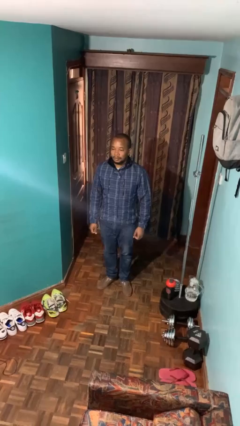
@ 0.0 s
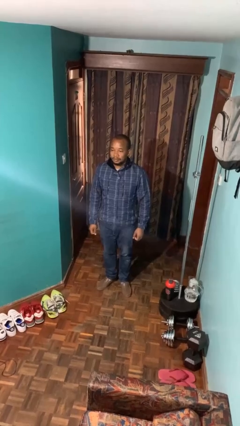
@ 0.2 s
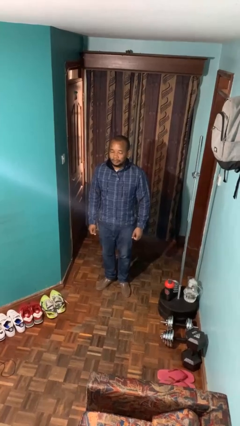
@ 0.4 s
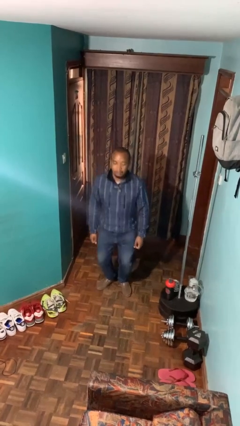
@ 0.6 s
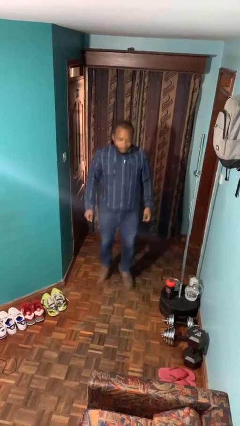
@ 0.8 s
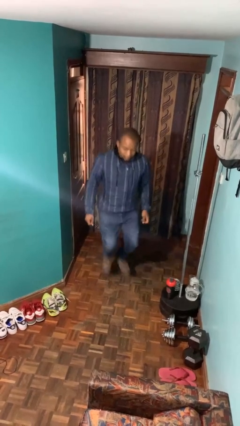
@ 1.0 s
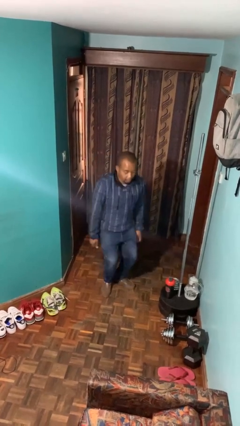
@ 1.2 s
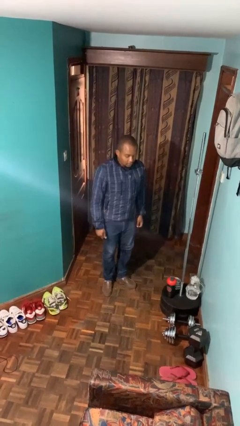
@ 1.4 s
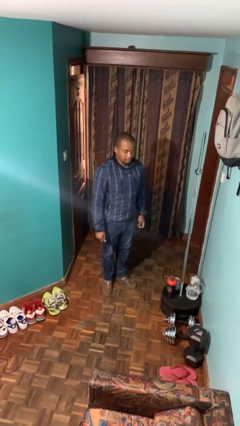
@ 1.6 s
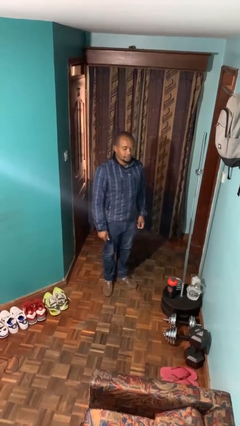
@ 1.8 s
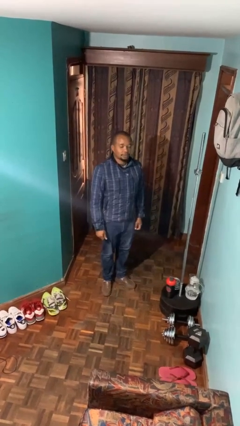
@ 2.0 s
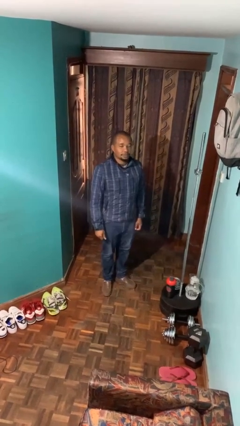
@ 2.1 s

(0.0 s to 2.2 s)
person jumps

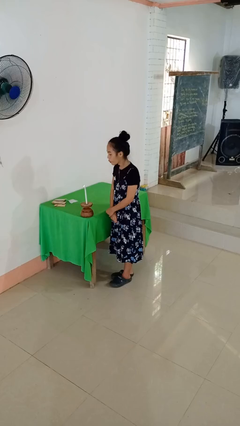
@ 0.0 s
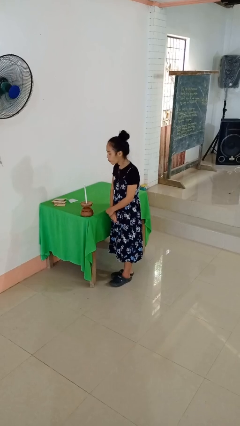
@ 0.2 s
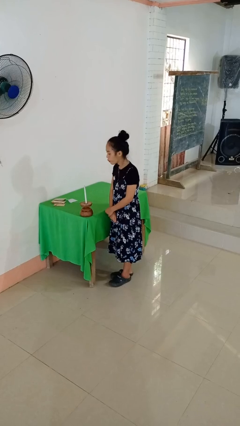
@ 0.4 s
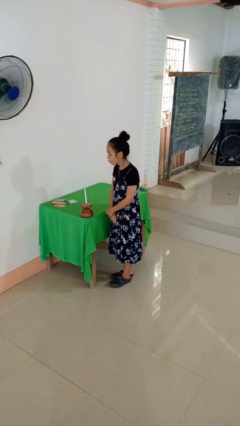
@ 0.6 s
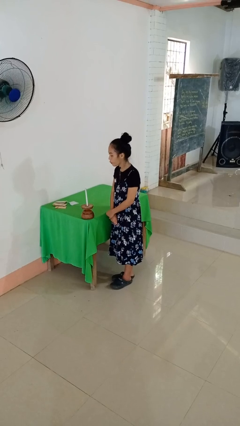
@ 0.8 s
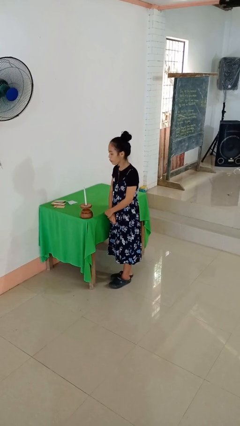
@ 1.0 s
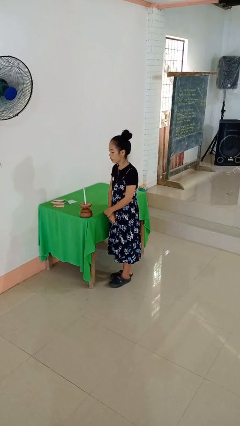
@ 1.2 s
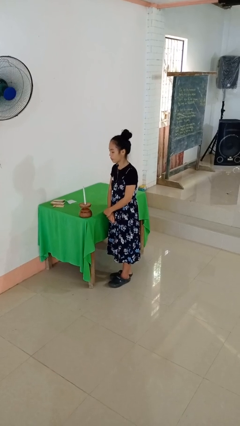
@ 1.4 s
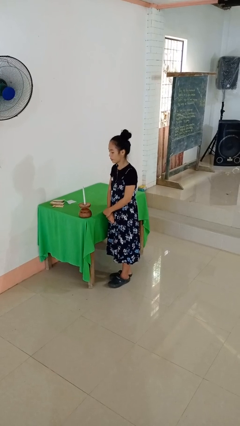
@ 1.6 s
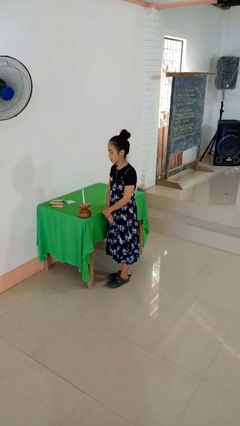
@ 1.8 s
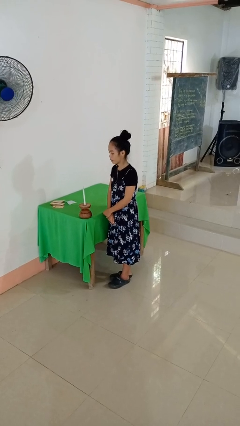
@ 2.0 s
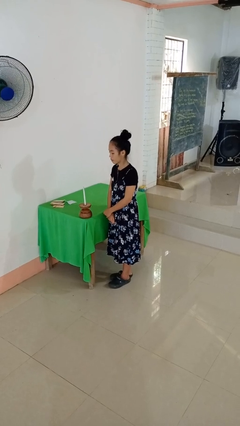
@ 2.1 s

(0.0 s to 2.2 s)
person extinguishes candle

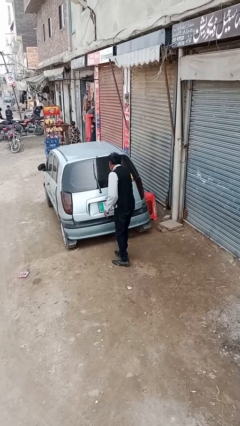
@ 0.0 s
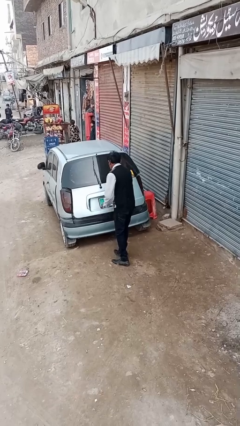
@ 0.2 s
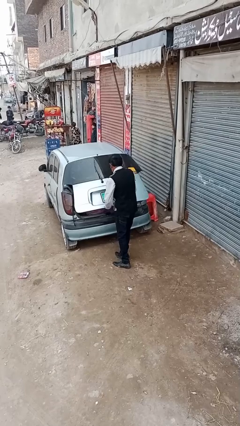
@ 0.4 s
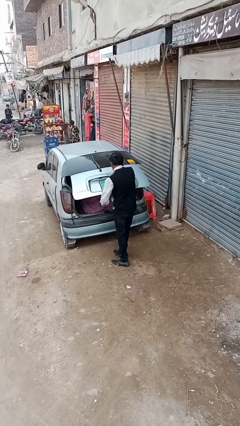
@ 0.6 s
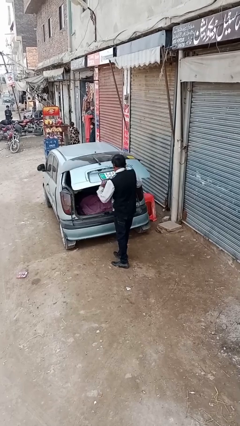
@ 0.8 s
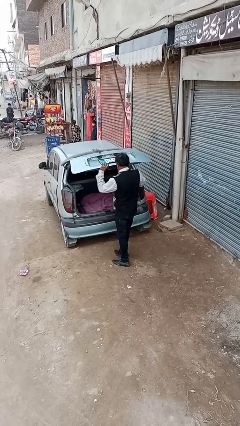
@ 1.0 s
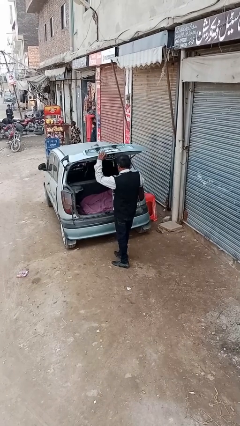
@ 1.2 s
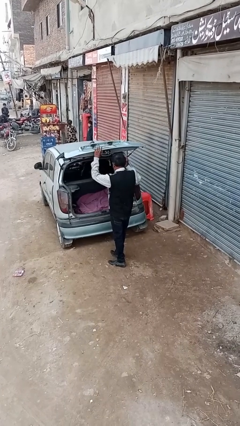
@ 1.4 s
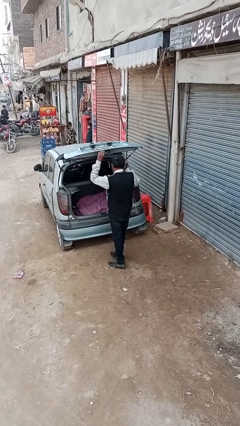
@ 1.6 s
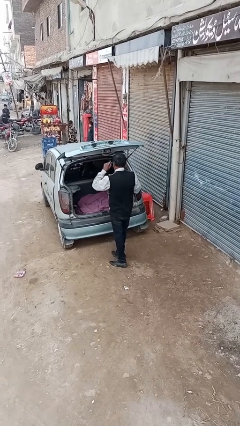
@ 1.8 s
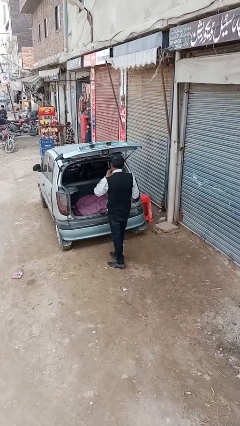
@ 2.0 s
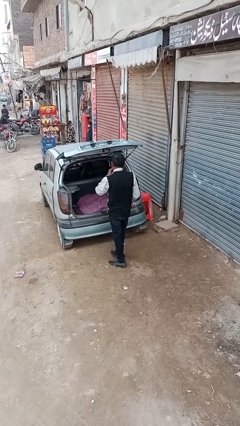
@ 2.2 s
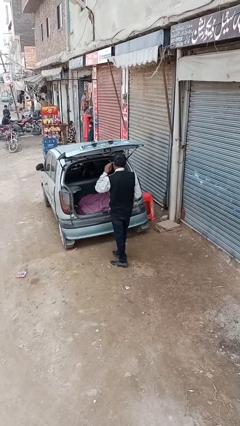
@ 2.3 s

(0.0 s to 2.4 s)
person opens car trunk

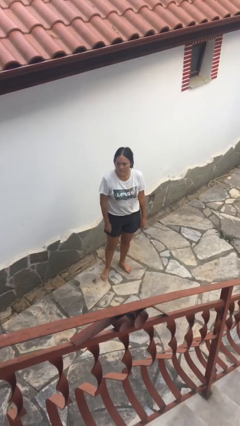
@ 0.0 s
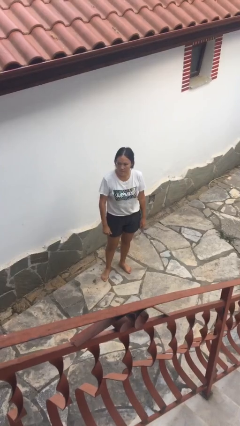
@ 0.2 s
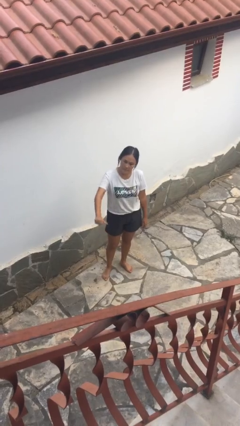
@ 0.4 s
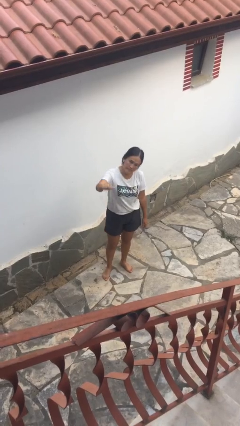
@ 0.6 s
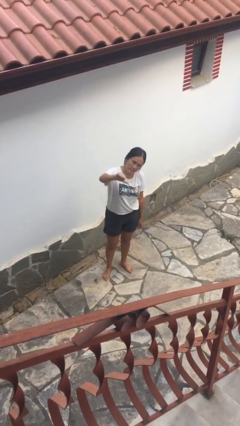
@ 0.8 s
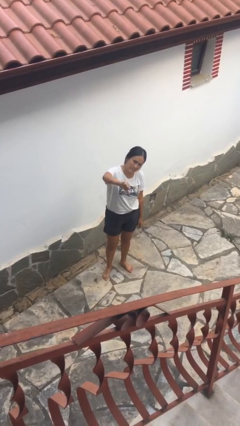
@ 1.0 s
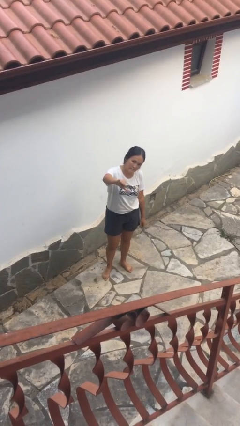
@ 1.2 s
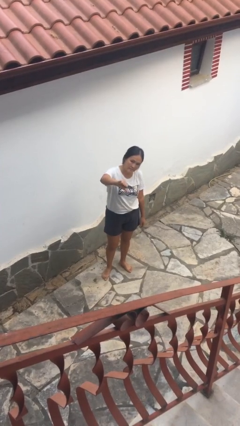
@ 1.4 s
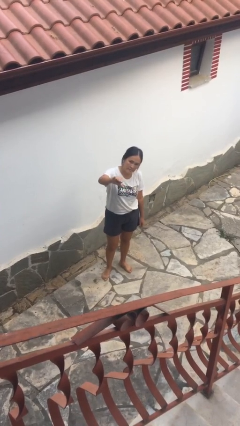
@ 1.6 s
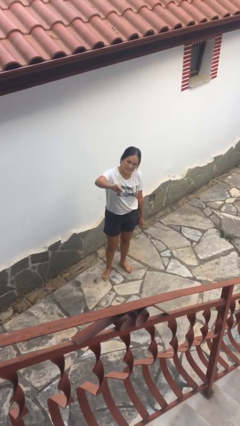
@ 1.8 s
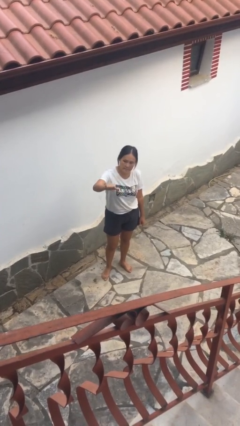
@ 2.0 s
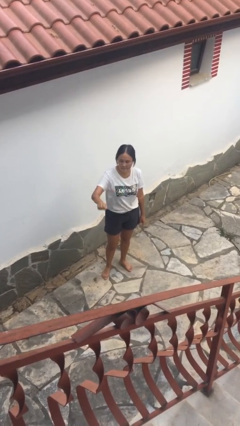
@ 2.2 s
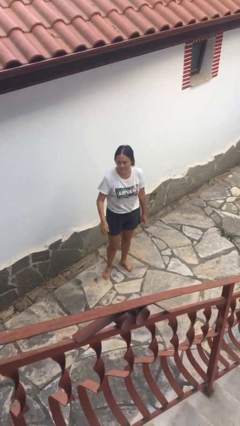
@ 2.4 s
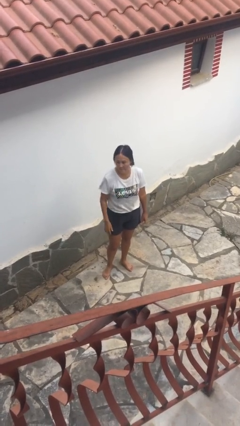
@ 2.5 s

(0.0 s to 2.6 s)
person gestures thumbs down

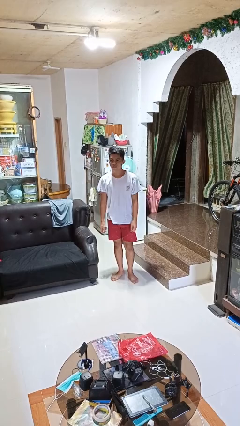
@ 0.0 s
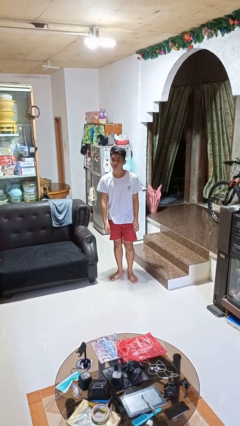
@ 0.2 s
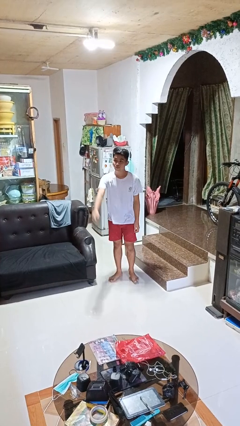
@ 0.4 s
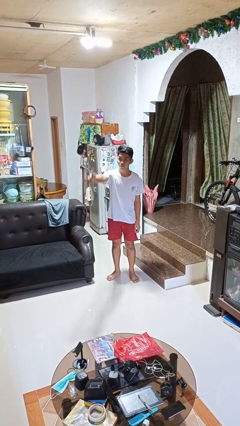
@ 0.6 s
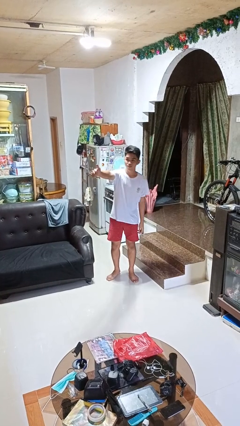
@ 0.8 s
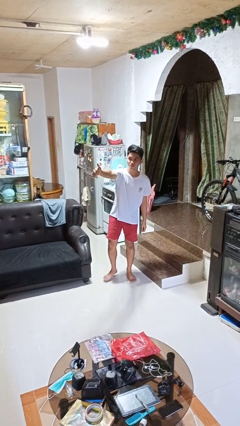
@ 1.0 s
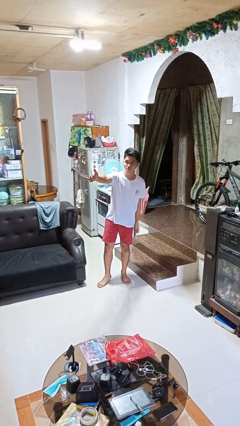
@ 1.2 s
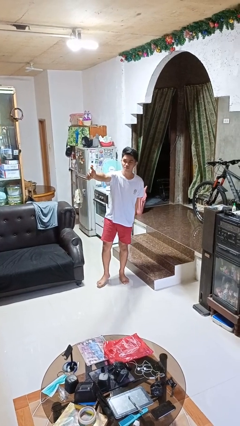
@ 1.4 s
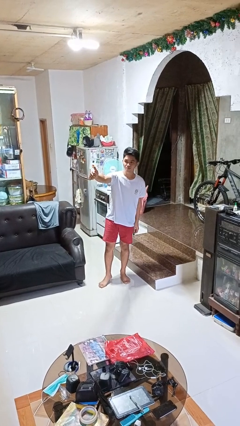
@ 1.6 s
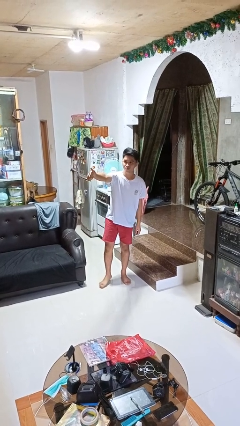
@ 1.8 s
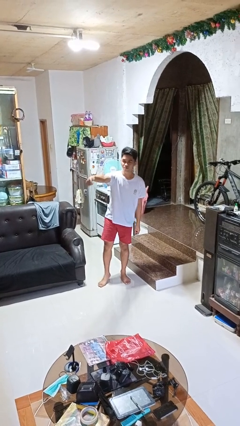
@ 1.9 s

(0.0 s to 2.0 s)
person gestures thumbs up

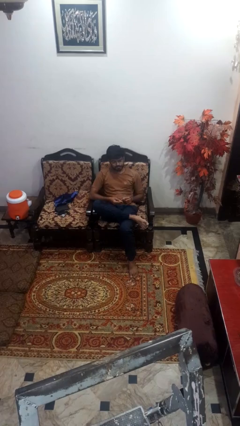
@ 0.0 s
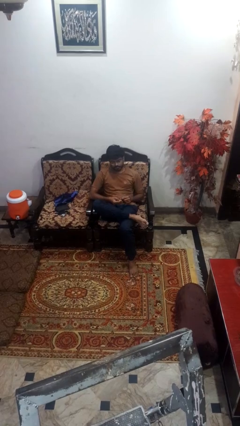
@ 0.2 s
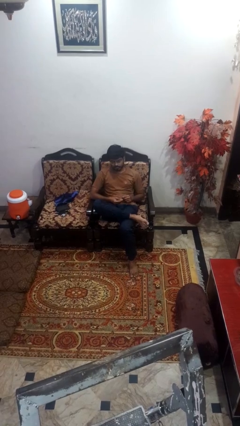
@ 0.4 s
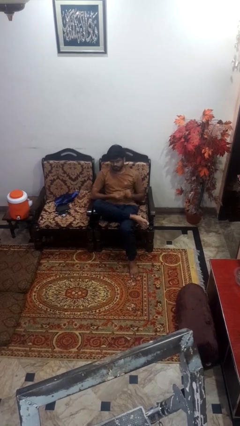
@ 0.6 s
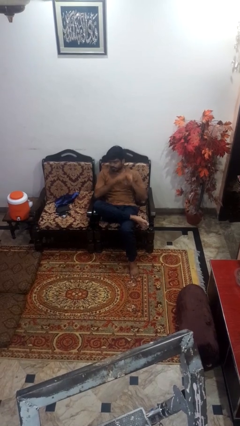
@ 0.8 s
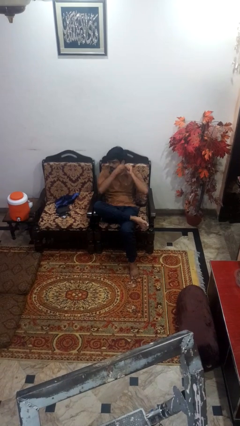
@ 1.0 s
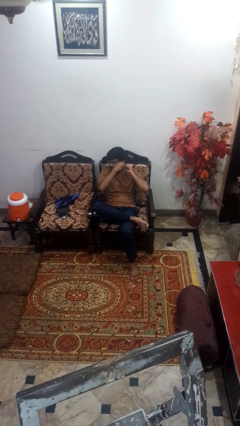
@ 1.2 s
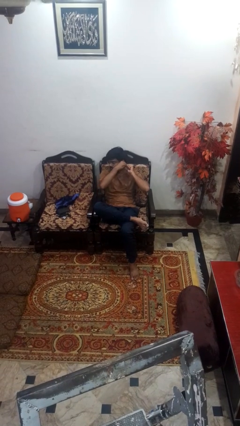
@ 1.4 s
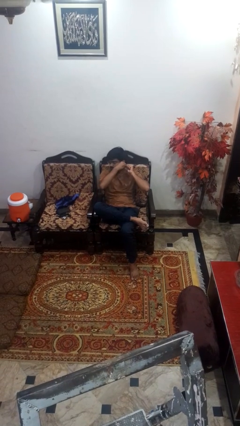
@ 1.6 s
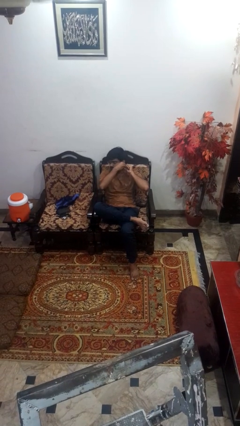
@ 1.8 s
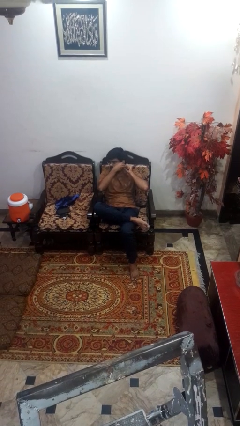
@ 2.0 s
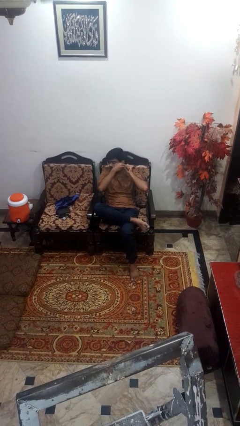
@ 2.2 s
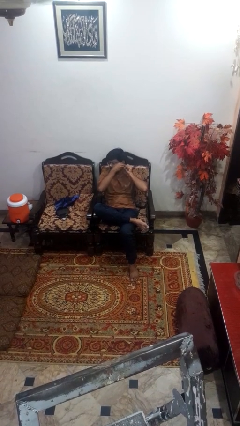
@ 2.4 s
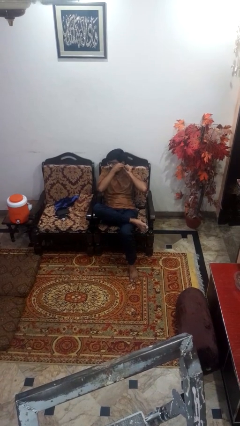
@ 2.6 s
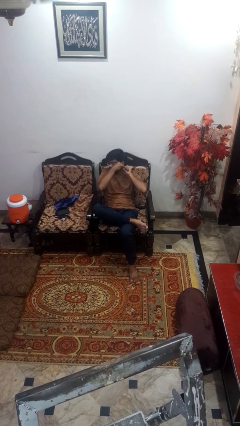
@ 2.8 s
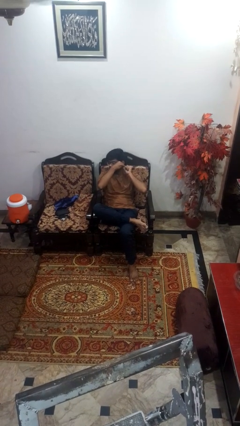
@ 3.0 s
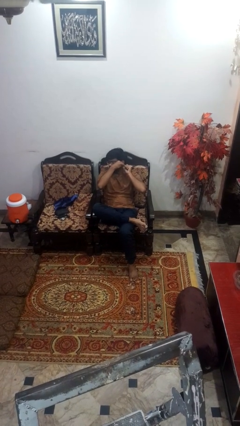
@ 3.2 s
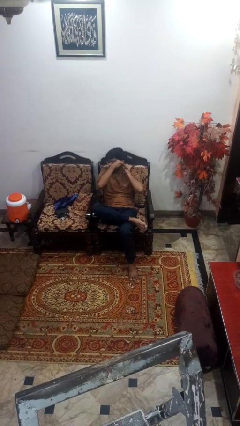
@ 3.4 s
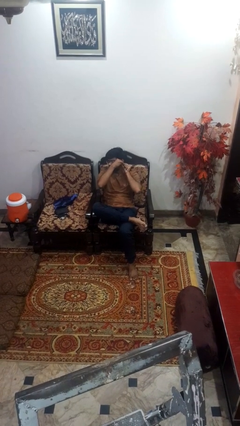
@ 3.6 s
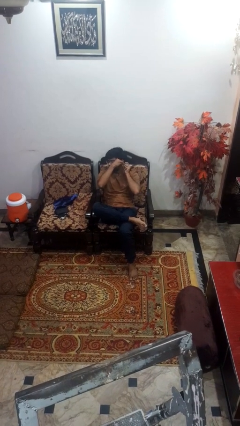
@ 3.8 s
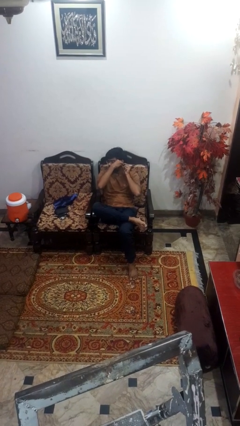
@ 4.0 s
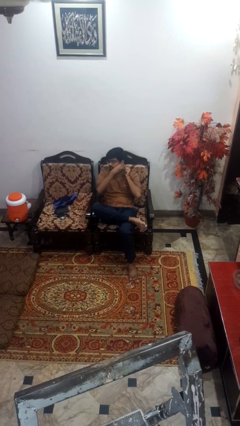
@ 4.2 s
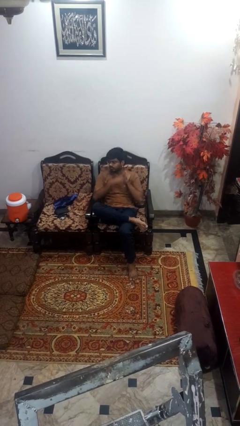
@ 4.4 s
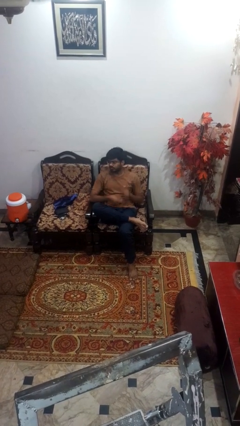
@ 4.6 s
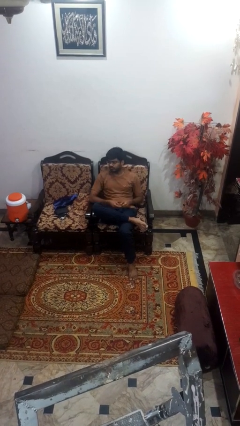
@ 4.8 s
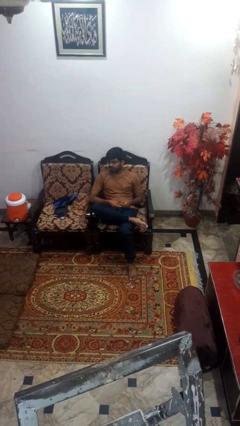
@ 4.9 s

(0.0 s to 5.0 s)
person puts on earrings

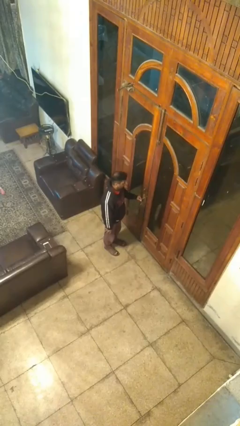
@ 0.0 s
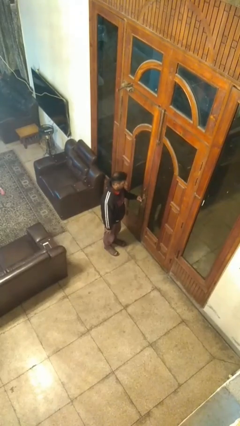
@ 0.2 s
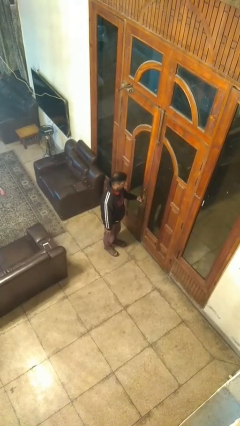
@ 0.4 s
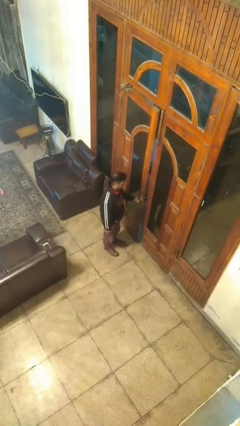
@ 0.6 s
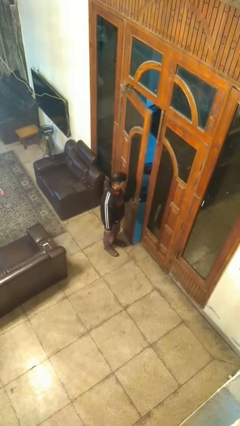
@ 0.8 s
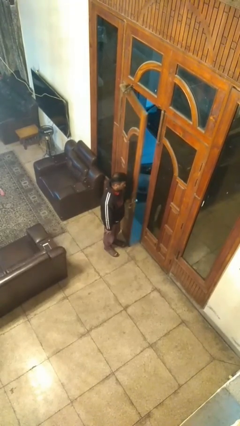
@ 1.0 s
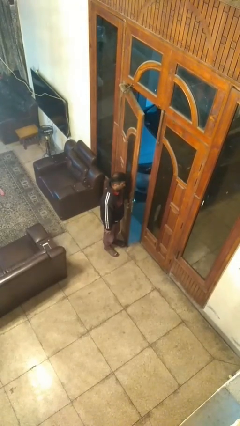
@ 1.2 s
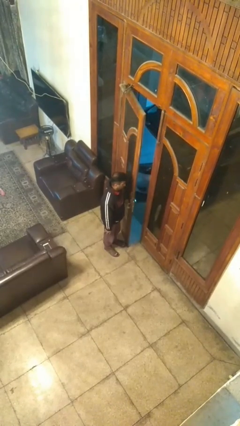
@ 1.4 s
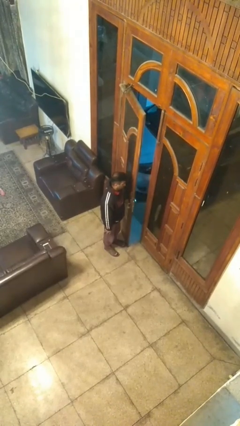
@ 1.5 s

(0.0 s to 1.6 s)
person opens facility door
